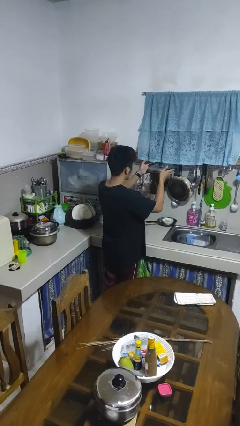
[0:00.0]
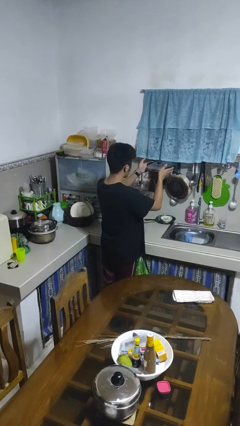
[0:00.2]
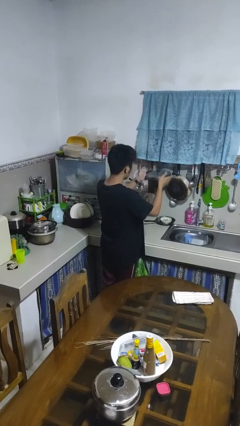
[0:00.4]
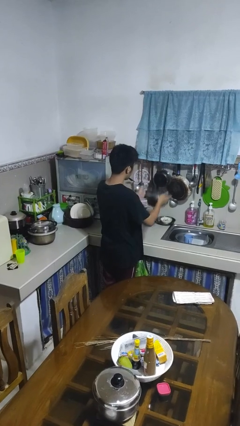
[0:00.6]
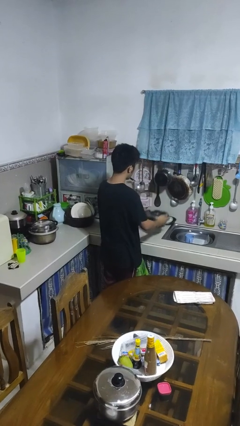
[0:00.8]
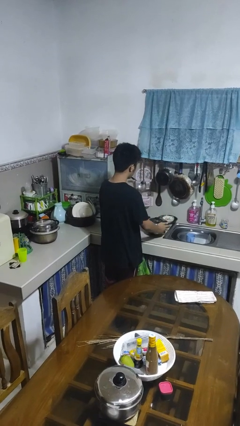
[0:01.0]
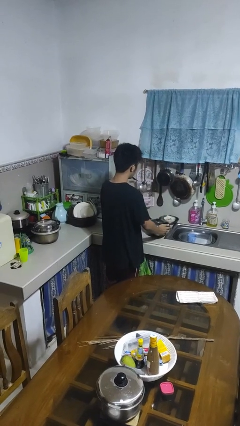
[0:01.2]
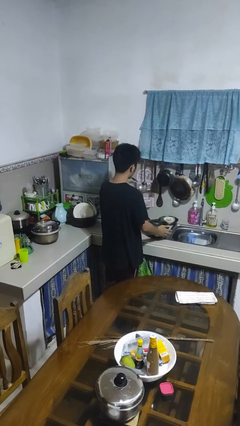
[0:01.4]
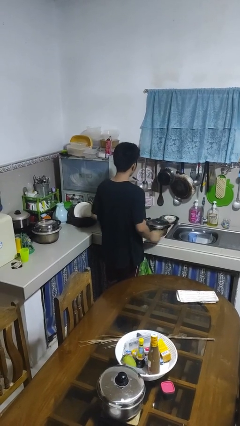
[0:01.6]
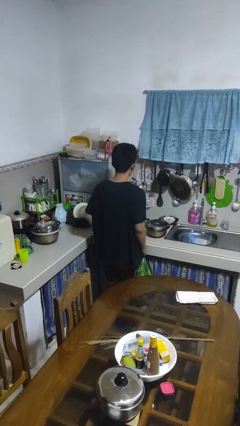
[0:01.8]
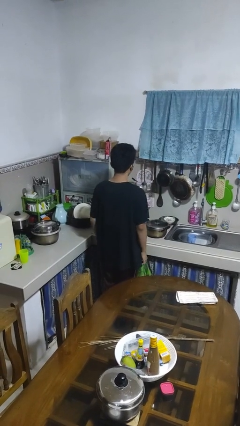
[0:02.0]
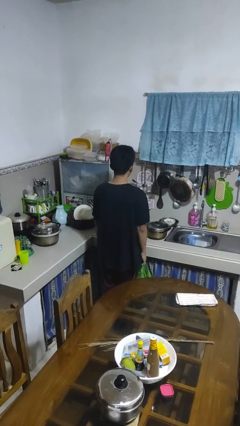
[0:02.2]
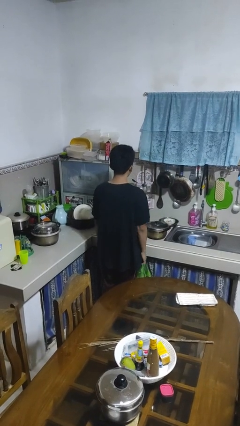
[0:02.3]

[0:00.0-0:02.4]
person puts down object on countertop

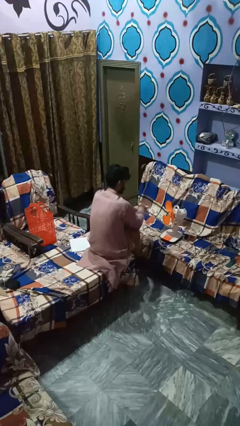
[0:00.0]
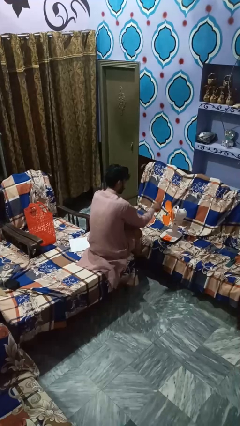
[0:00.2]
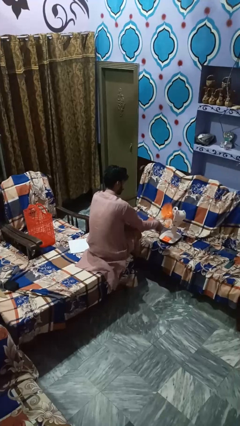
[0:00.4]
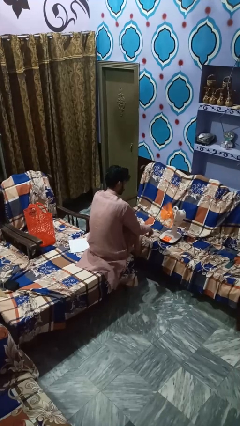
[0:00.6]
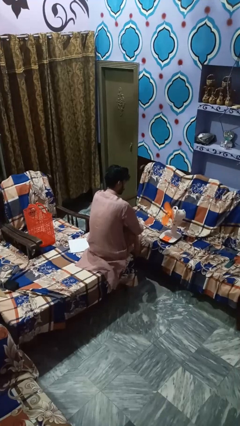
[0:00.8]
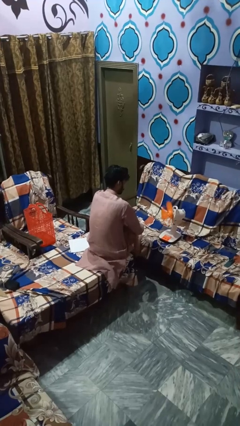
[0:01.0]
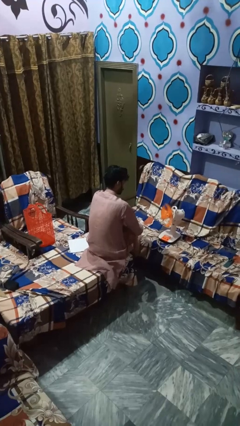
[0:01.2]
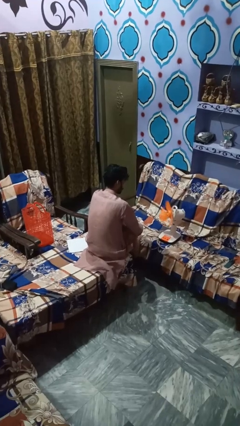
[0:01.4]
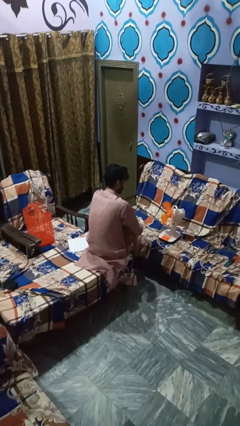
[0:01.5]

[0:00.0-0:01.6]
person turns on fan

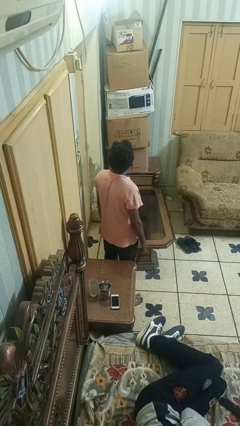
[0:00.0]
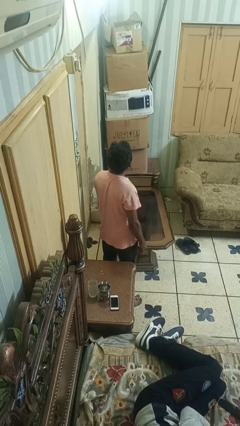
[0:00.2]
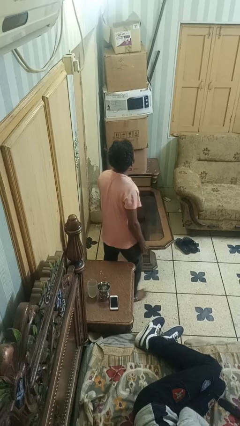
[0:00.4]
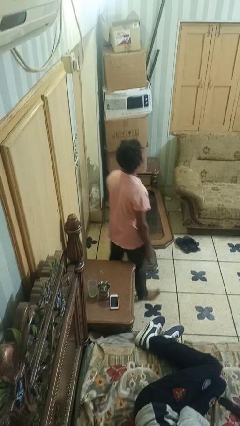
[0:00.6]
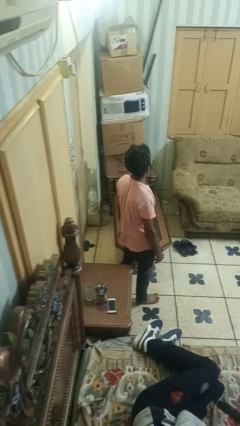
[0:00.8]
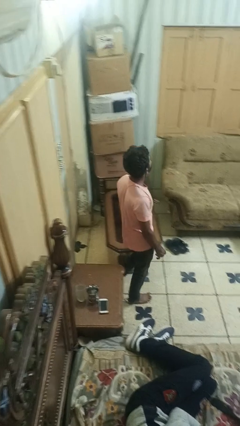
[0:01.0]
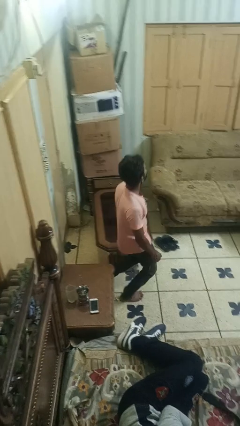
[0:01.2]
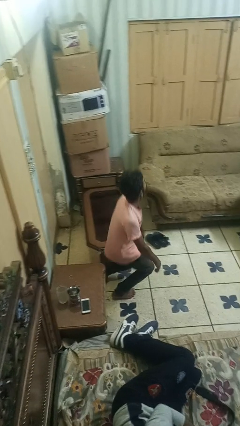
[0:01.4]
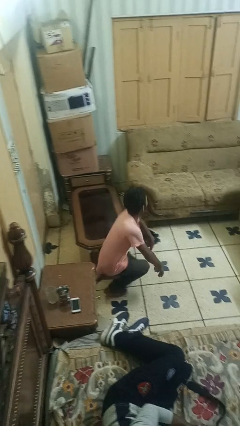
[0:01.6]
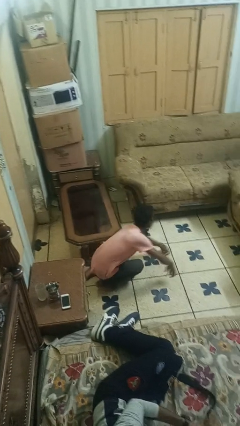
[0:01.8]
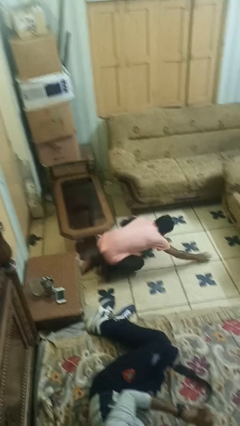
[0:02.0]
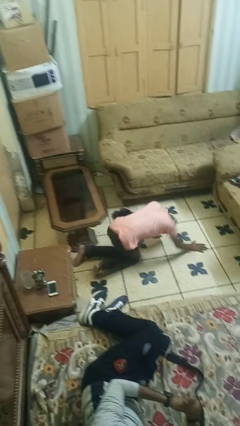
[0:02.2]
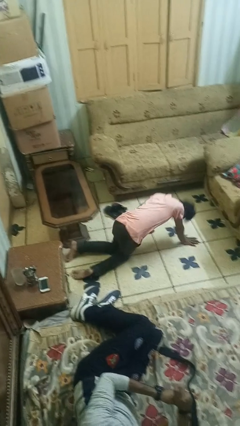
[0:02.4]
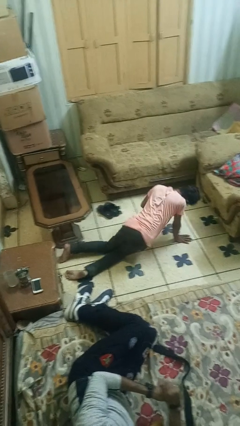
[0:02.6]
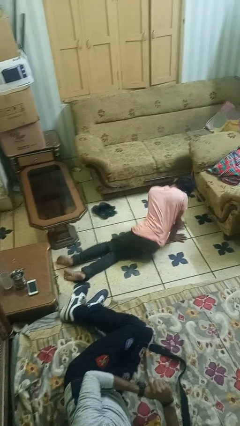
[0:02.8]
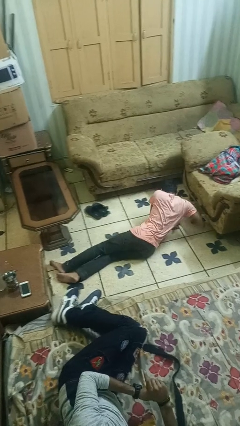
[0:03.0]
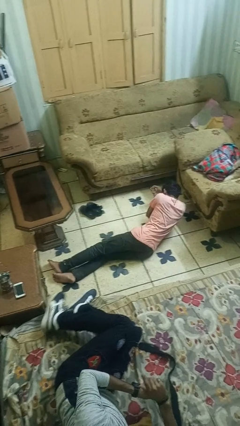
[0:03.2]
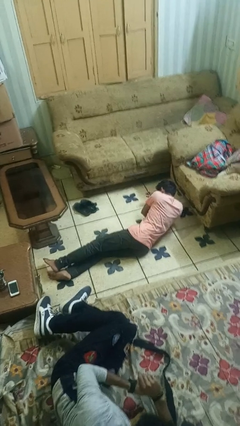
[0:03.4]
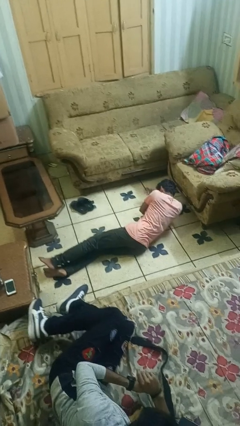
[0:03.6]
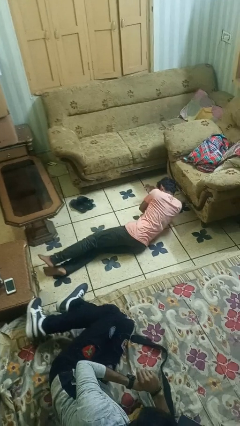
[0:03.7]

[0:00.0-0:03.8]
person trips on object on floor

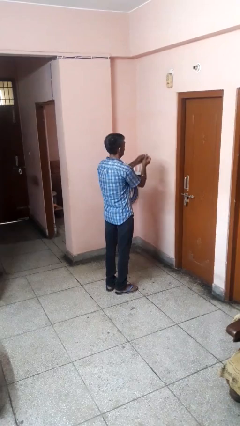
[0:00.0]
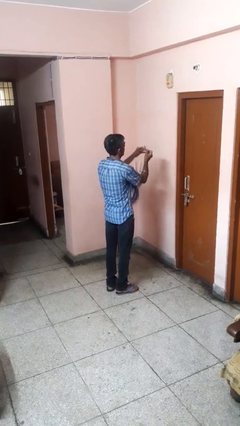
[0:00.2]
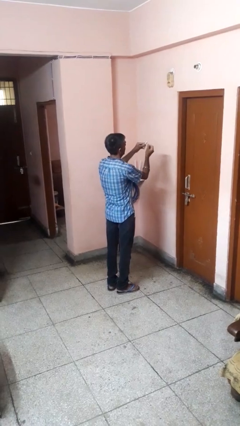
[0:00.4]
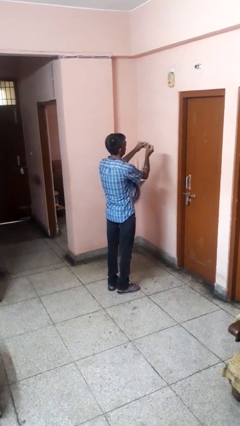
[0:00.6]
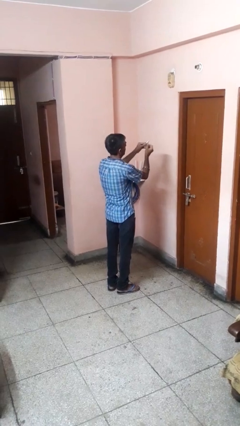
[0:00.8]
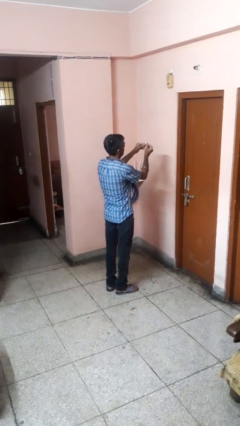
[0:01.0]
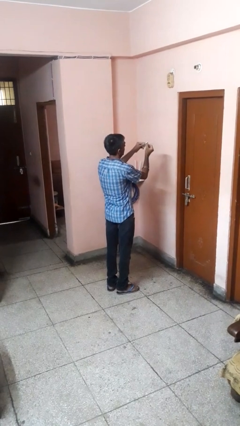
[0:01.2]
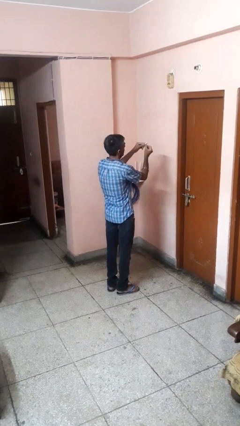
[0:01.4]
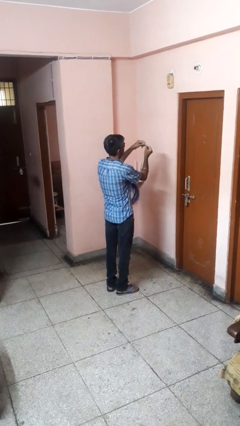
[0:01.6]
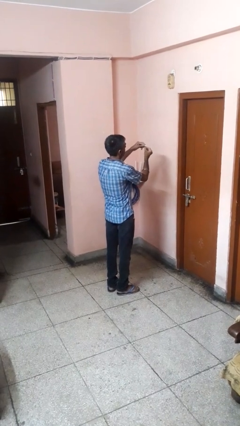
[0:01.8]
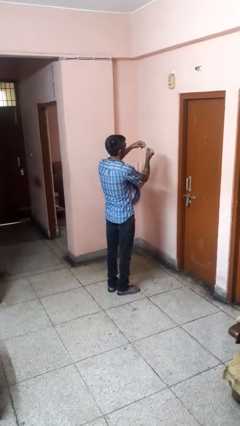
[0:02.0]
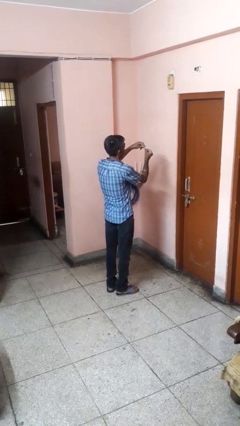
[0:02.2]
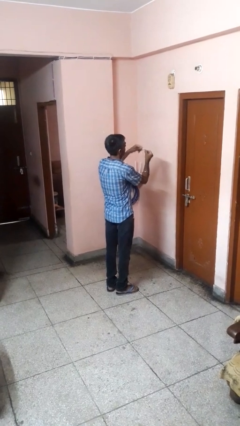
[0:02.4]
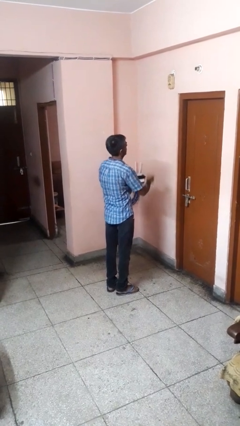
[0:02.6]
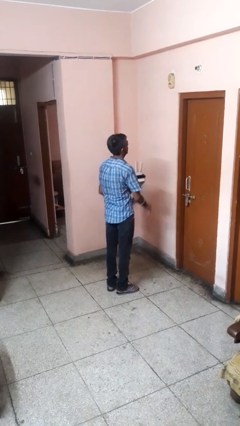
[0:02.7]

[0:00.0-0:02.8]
person files fingernails

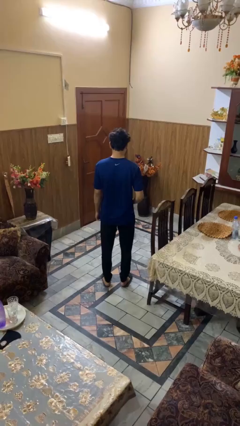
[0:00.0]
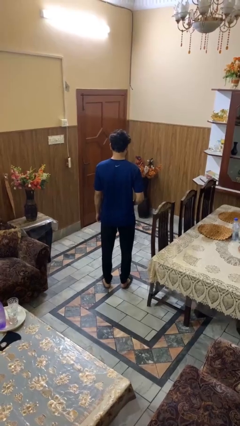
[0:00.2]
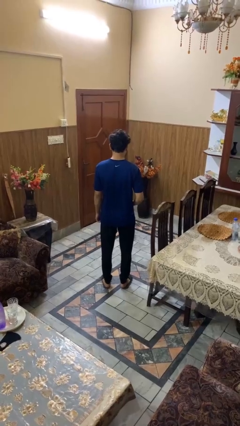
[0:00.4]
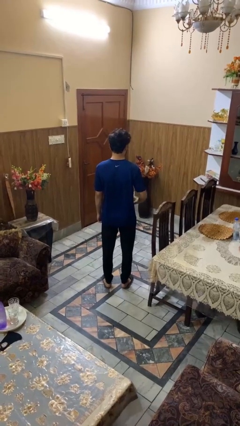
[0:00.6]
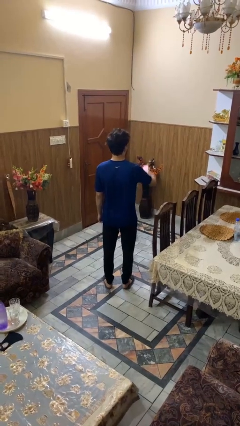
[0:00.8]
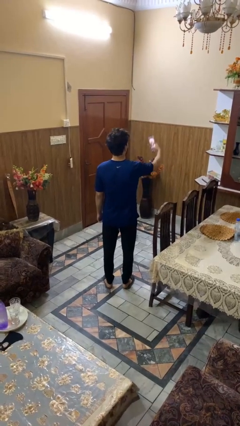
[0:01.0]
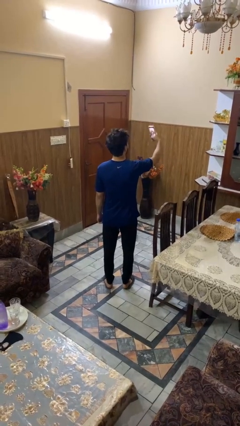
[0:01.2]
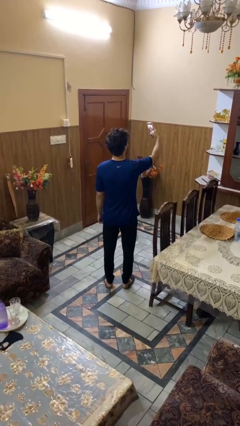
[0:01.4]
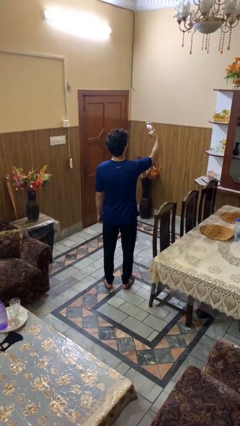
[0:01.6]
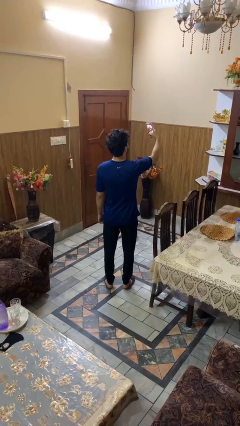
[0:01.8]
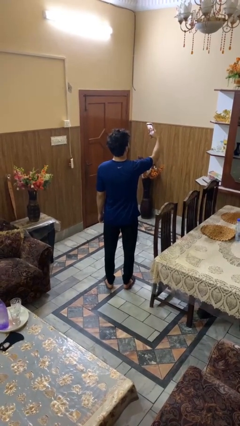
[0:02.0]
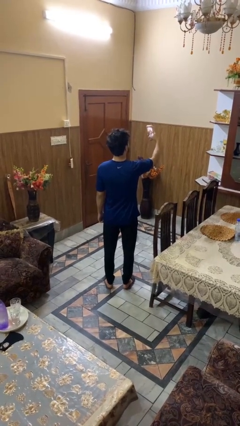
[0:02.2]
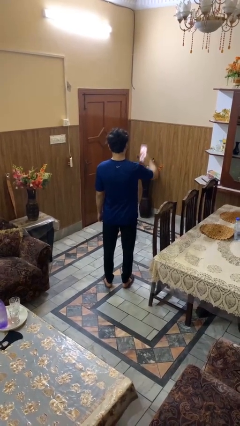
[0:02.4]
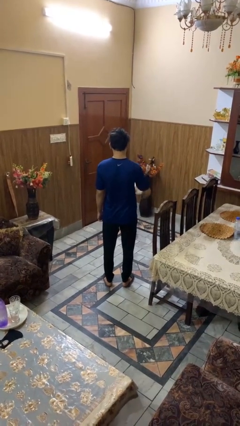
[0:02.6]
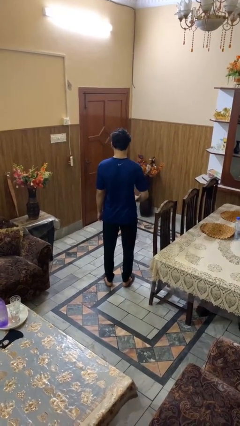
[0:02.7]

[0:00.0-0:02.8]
person takes selfie

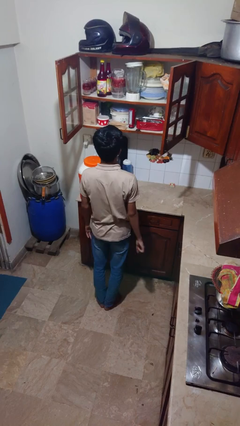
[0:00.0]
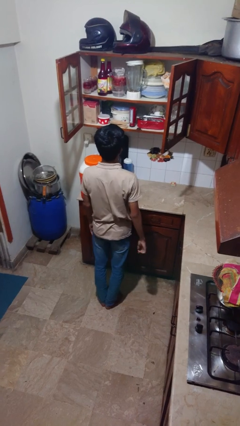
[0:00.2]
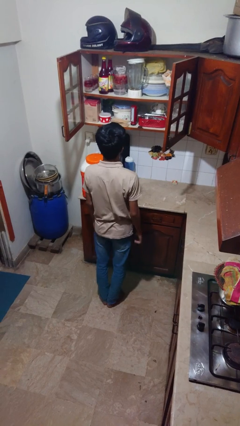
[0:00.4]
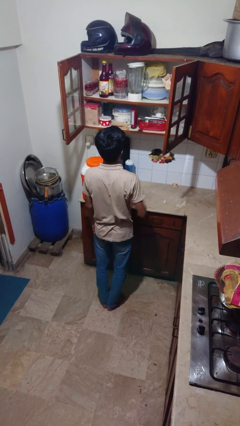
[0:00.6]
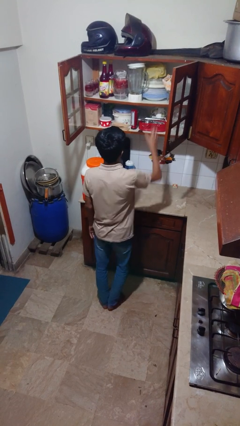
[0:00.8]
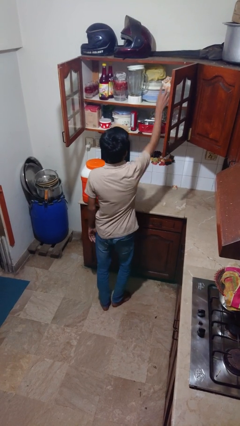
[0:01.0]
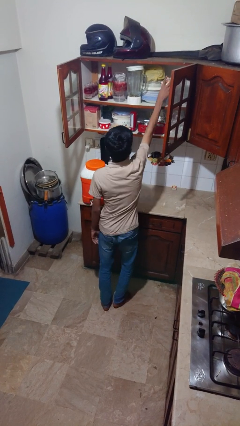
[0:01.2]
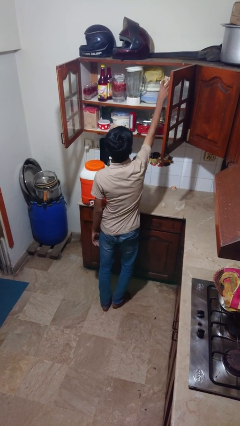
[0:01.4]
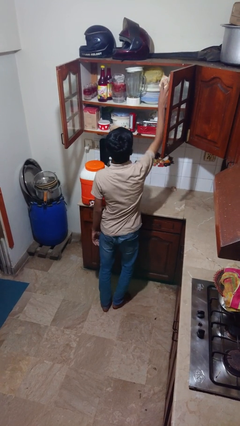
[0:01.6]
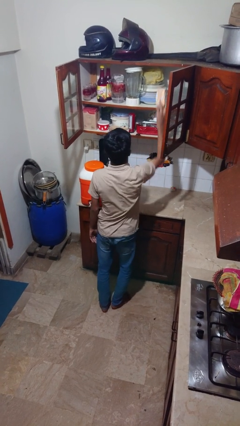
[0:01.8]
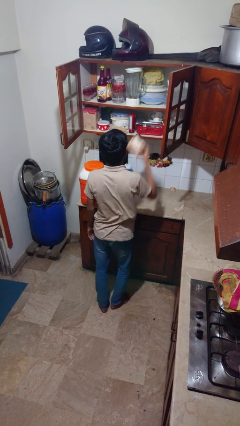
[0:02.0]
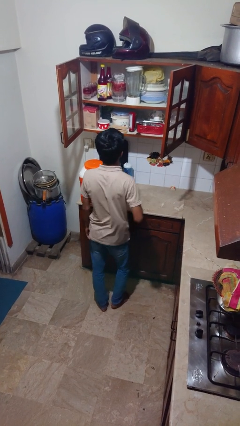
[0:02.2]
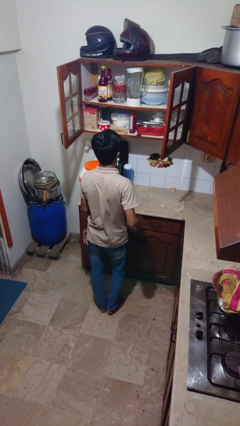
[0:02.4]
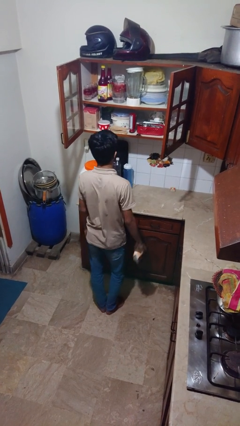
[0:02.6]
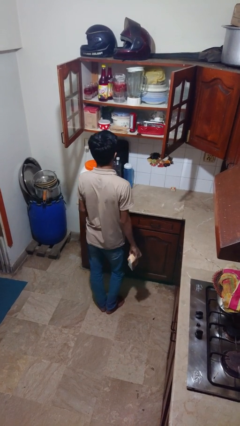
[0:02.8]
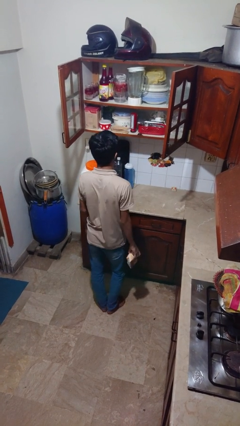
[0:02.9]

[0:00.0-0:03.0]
person picks up object from cabinet

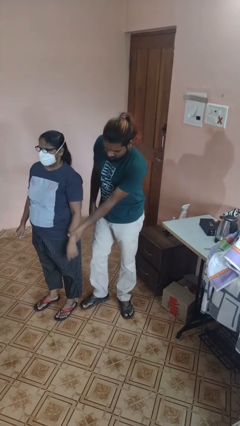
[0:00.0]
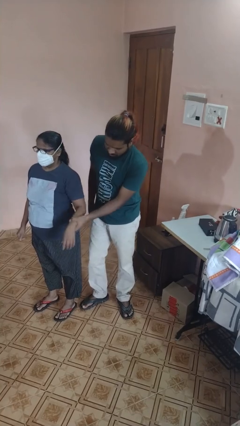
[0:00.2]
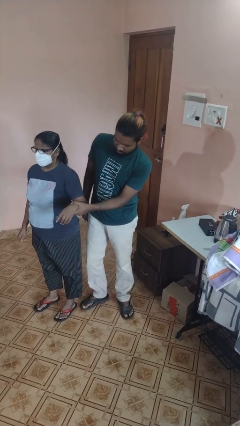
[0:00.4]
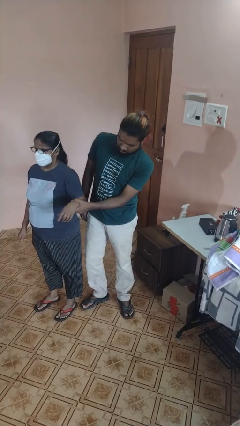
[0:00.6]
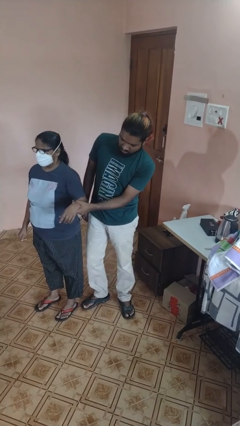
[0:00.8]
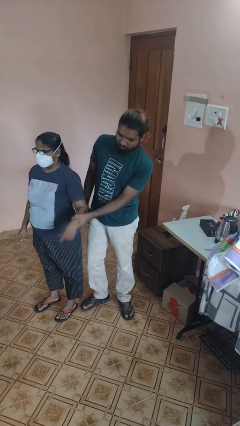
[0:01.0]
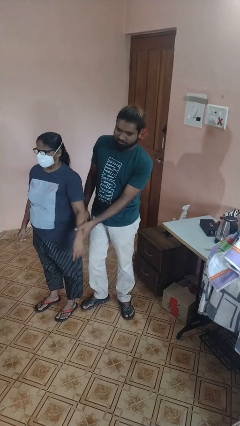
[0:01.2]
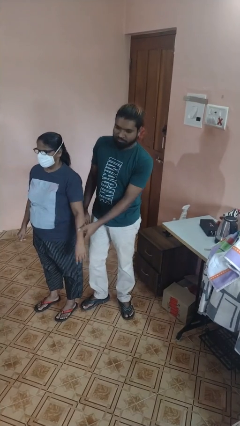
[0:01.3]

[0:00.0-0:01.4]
person grabs person by forearm
